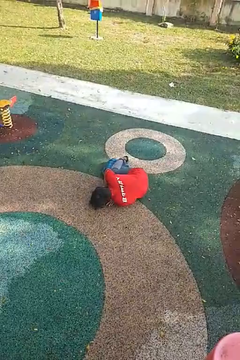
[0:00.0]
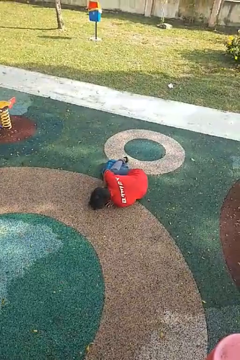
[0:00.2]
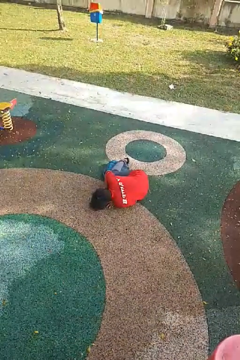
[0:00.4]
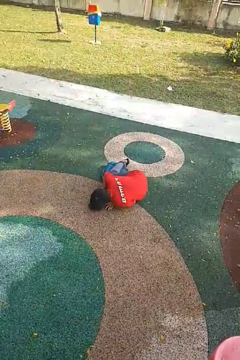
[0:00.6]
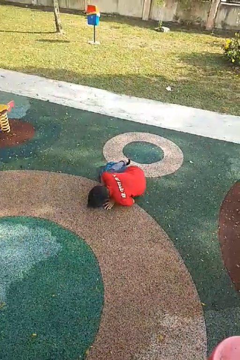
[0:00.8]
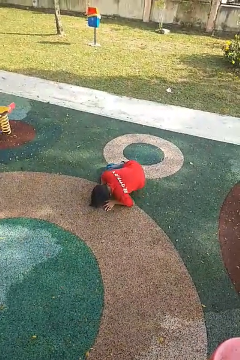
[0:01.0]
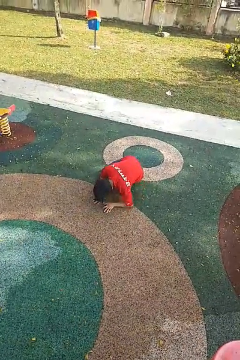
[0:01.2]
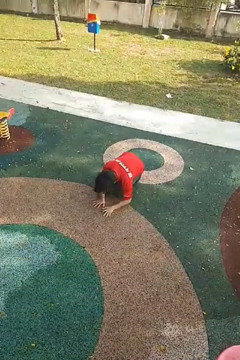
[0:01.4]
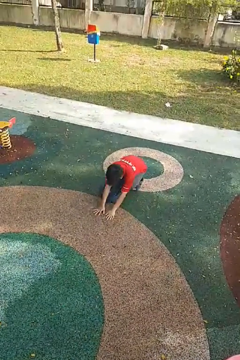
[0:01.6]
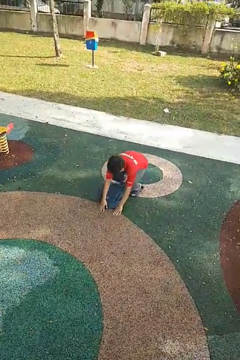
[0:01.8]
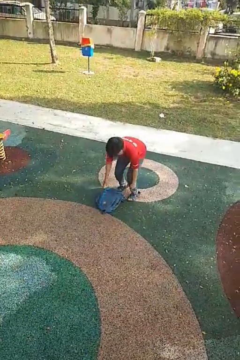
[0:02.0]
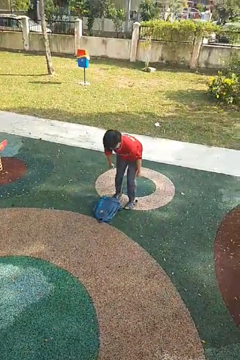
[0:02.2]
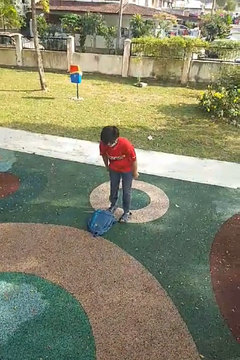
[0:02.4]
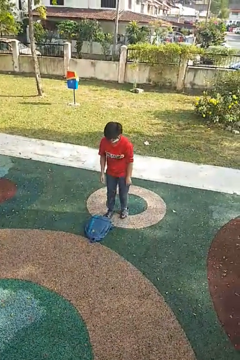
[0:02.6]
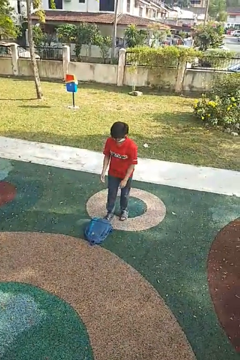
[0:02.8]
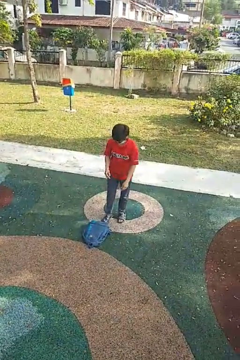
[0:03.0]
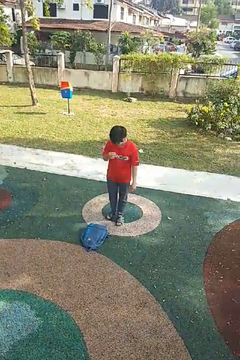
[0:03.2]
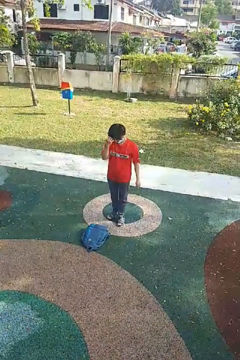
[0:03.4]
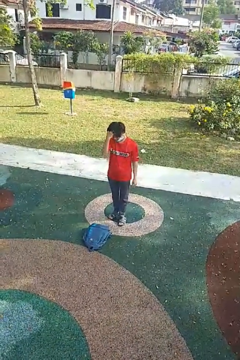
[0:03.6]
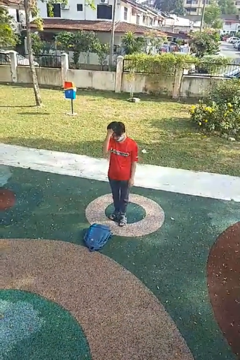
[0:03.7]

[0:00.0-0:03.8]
person stands up from floor

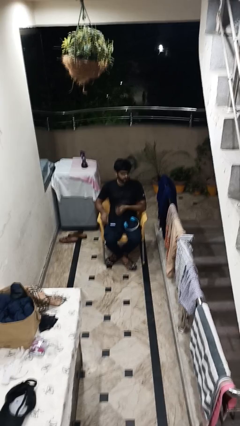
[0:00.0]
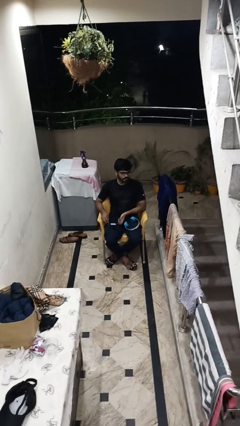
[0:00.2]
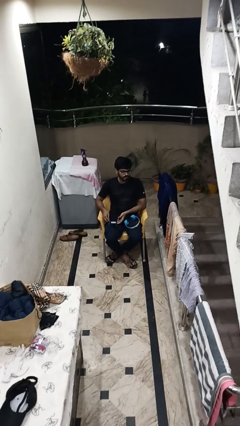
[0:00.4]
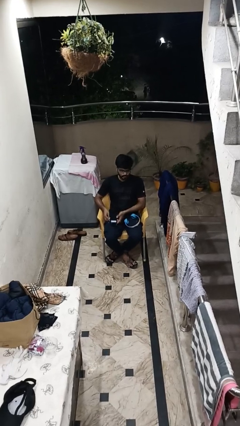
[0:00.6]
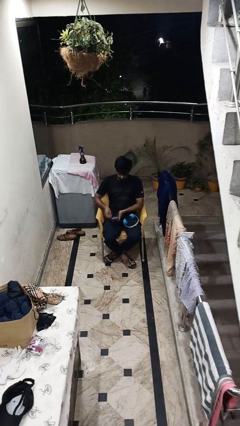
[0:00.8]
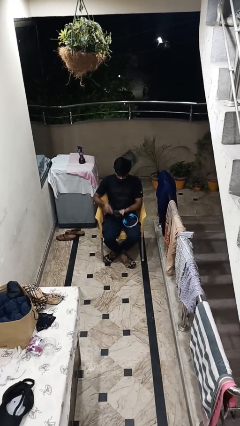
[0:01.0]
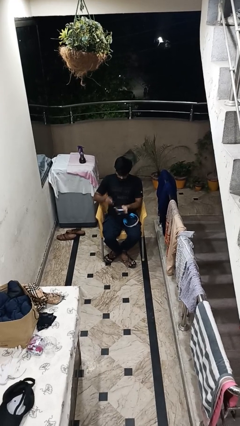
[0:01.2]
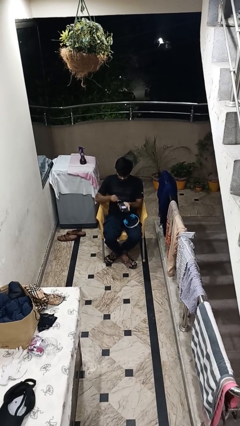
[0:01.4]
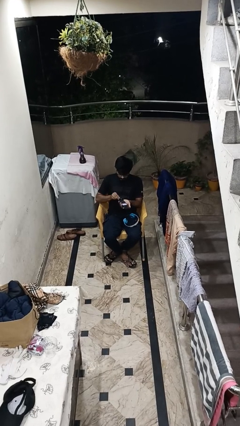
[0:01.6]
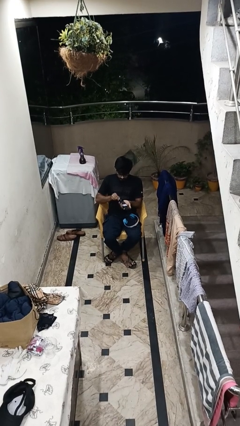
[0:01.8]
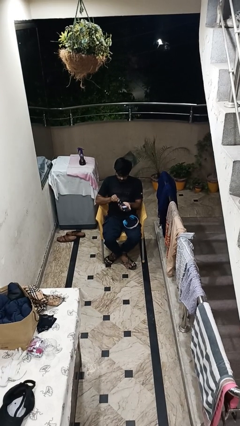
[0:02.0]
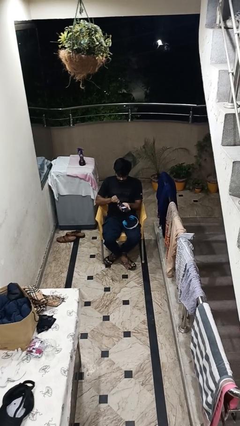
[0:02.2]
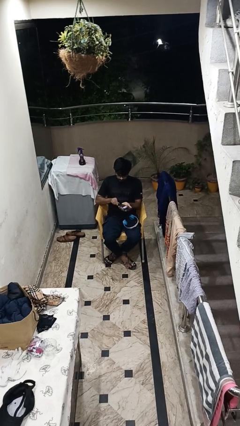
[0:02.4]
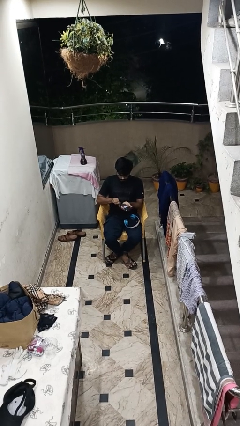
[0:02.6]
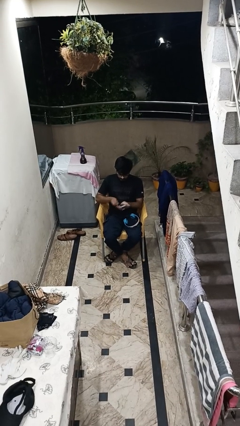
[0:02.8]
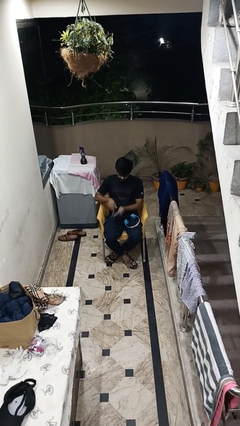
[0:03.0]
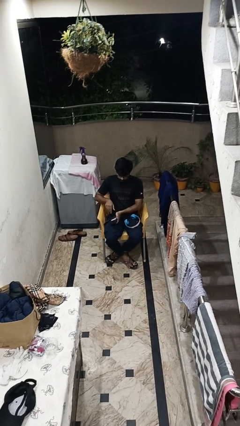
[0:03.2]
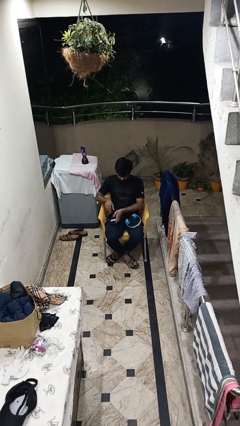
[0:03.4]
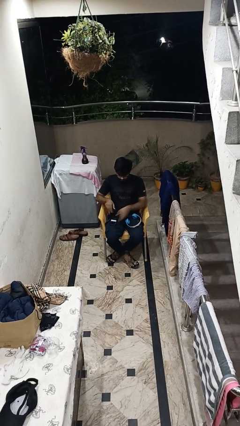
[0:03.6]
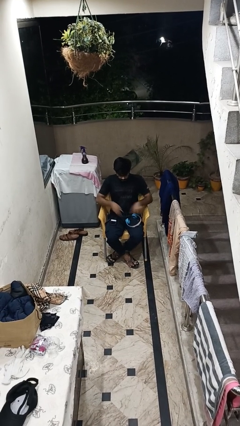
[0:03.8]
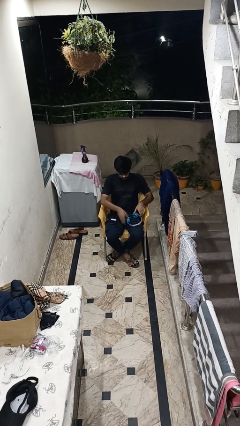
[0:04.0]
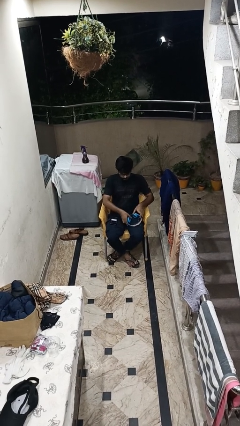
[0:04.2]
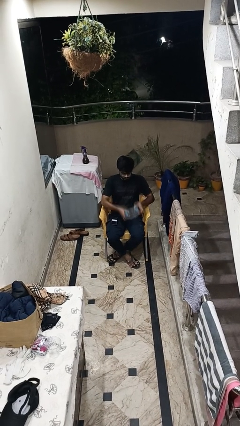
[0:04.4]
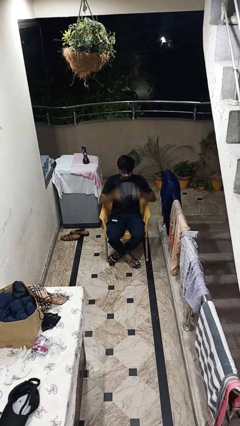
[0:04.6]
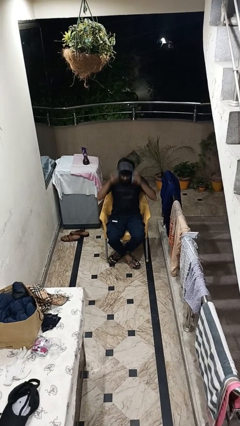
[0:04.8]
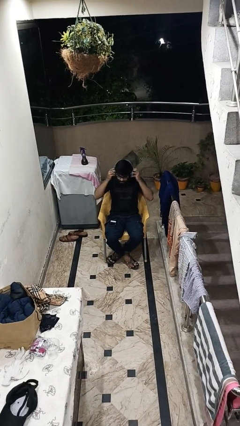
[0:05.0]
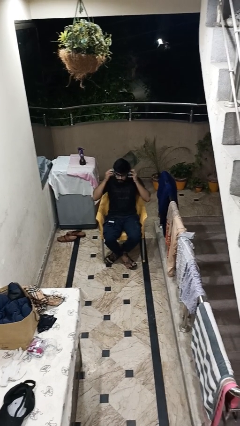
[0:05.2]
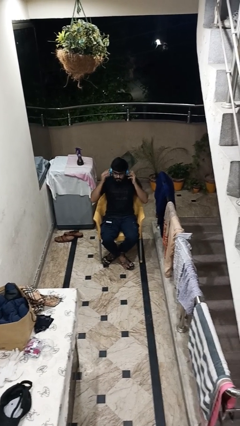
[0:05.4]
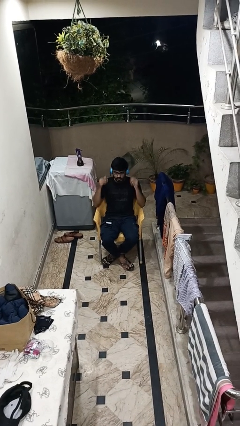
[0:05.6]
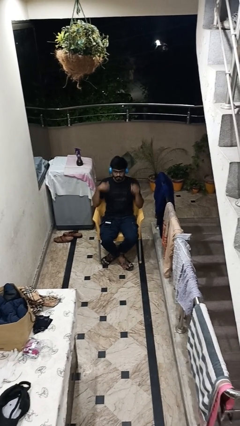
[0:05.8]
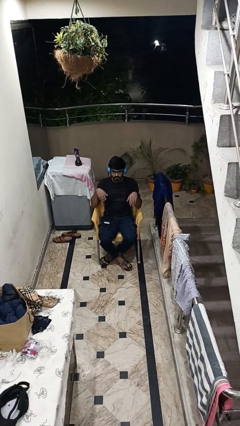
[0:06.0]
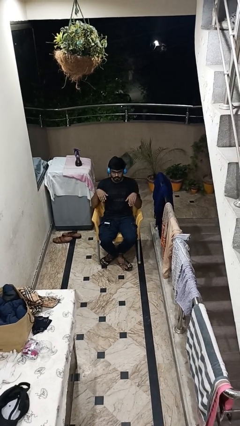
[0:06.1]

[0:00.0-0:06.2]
person puts on headphones

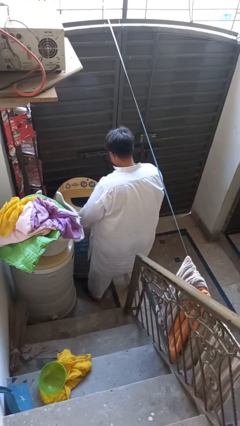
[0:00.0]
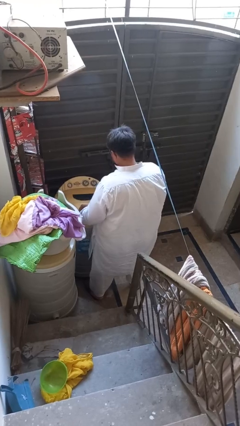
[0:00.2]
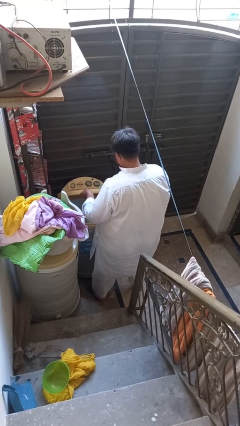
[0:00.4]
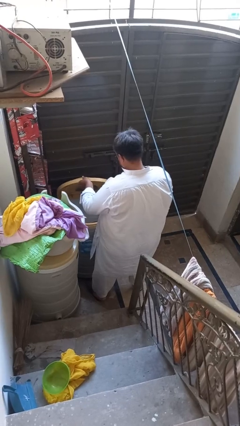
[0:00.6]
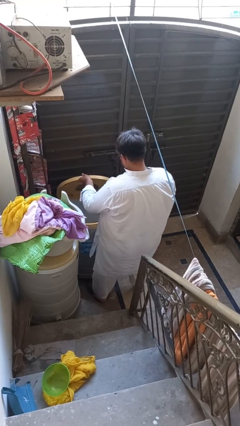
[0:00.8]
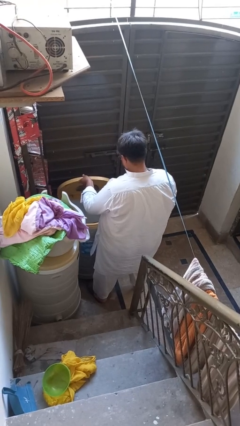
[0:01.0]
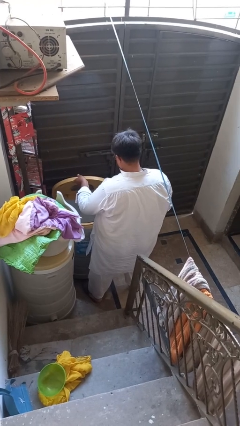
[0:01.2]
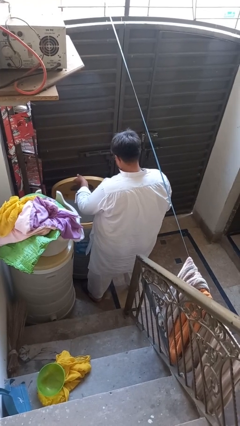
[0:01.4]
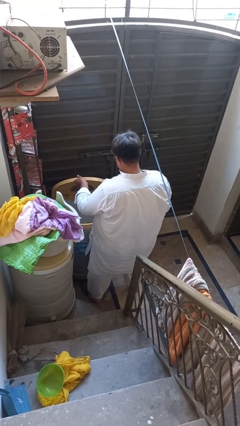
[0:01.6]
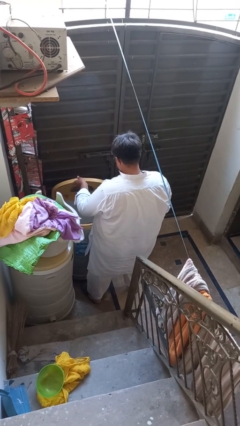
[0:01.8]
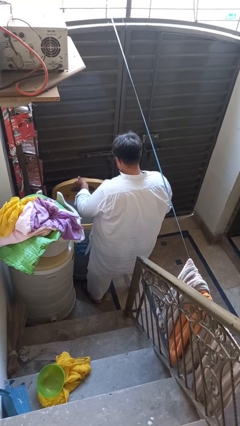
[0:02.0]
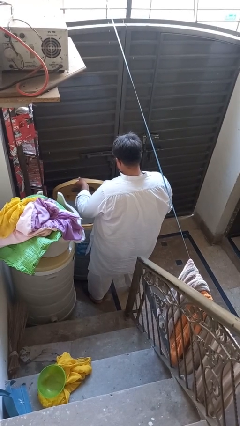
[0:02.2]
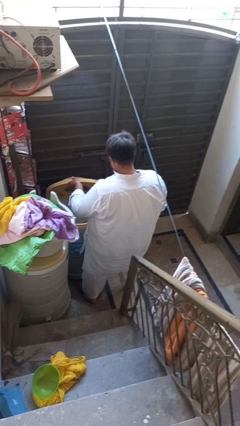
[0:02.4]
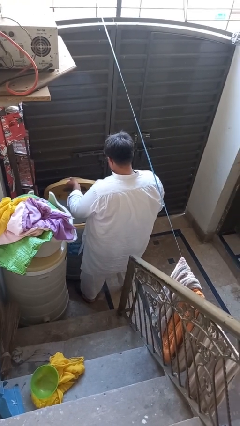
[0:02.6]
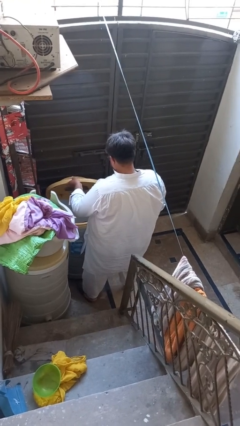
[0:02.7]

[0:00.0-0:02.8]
person opens clothes washer

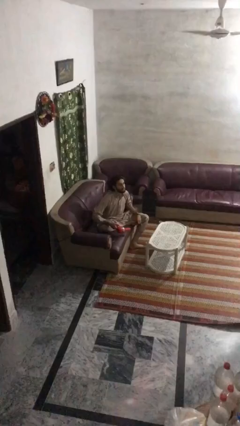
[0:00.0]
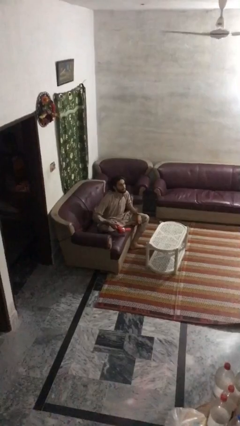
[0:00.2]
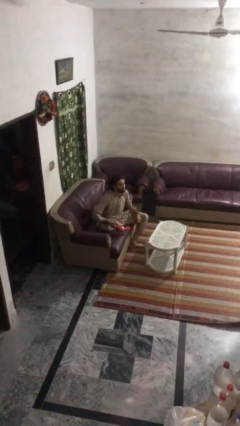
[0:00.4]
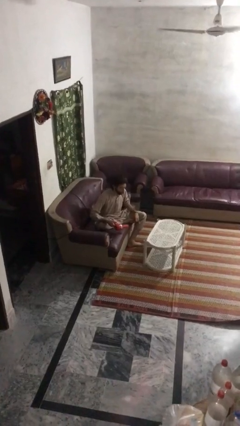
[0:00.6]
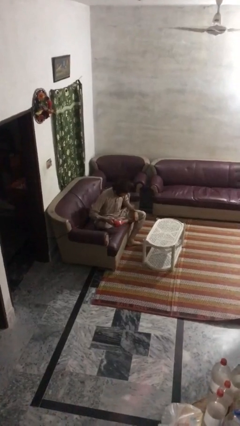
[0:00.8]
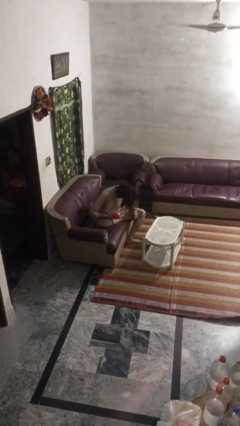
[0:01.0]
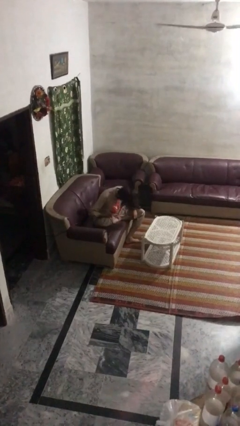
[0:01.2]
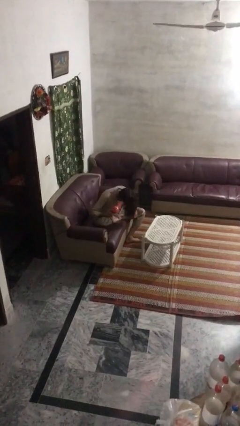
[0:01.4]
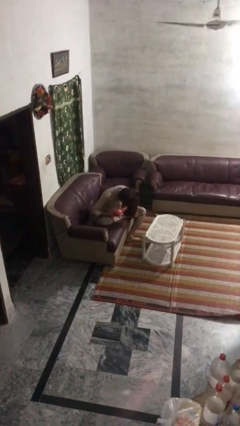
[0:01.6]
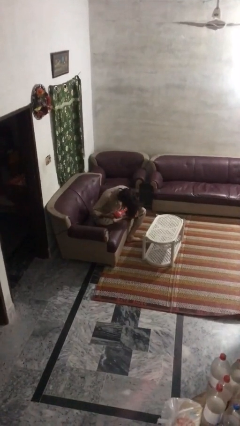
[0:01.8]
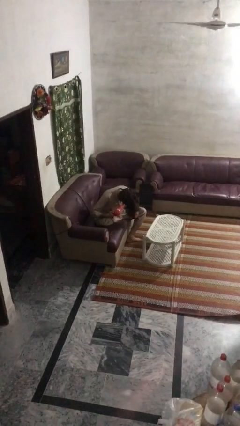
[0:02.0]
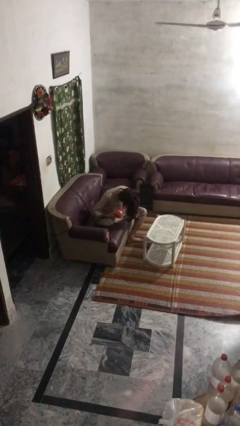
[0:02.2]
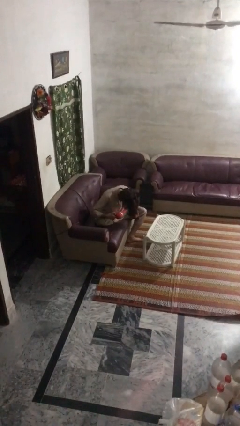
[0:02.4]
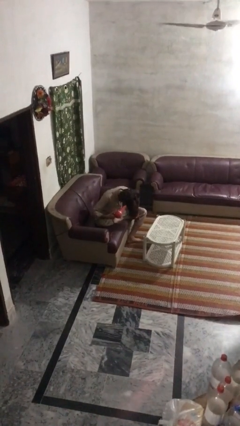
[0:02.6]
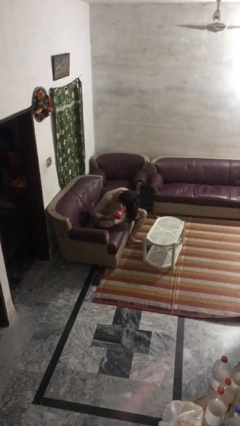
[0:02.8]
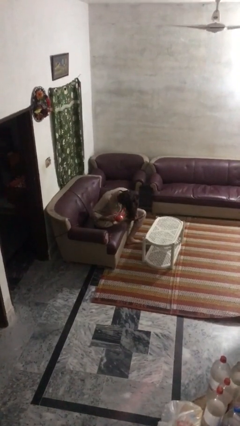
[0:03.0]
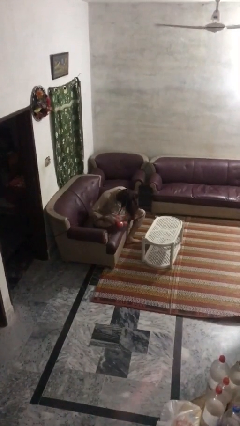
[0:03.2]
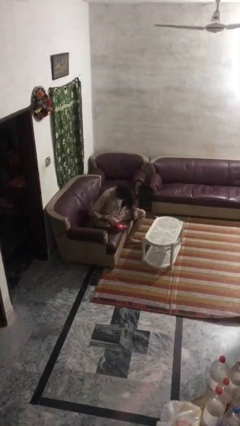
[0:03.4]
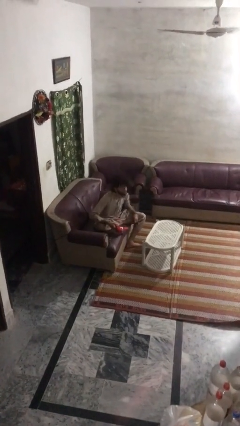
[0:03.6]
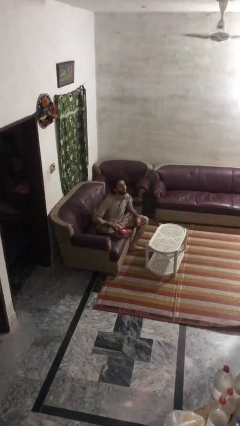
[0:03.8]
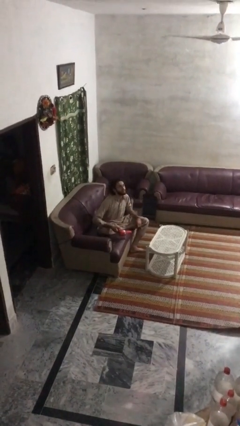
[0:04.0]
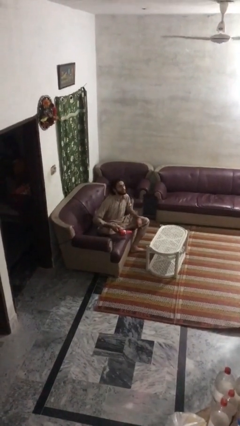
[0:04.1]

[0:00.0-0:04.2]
person dries hair with hairdryer

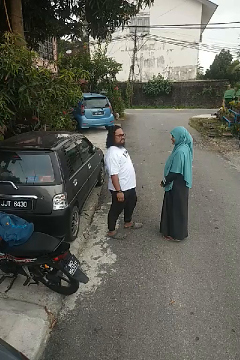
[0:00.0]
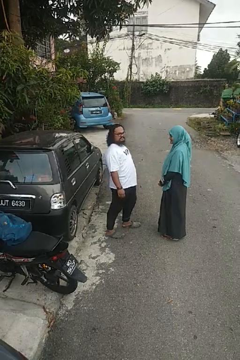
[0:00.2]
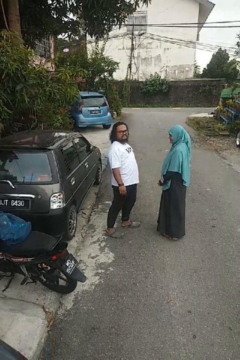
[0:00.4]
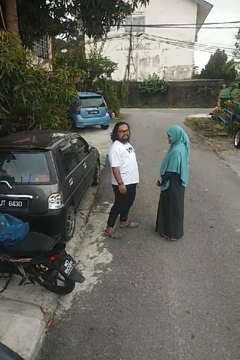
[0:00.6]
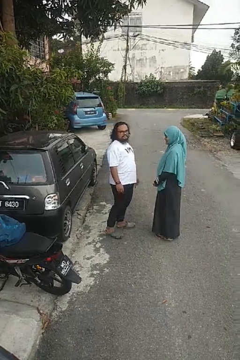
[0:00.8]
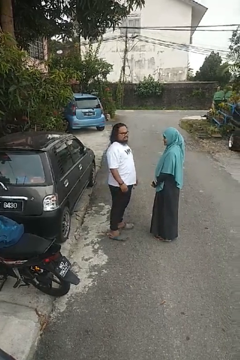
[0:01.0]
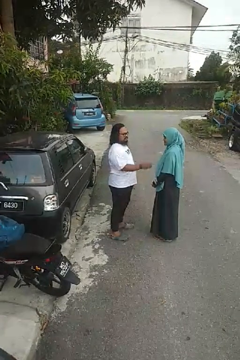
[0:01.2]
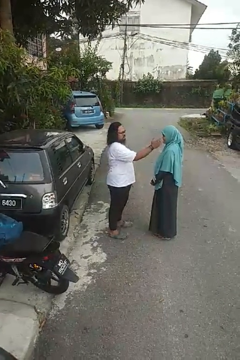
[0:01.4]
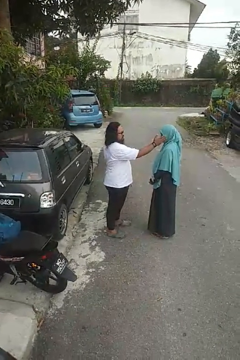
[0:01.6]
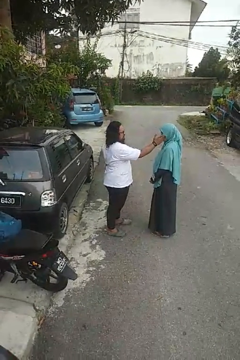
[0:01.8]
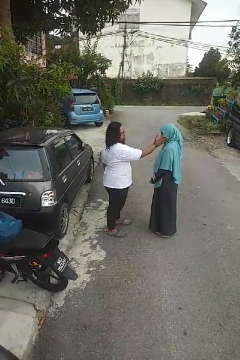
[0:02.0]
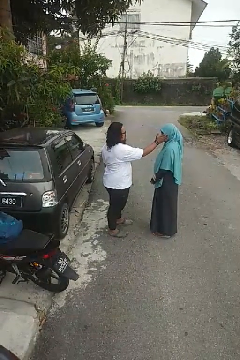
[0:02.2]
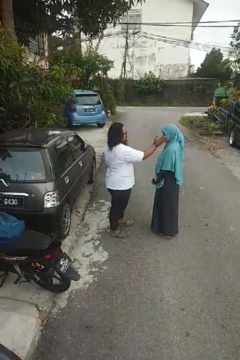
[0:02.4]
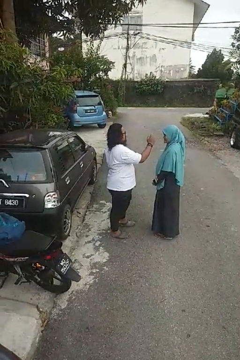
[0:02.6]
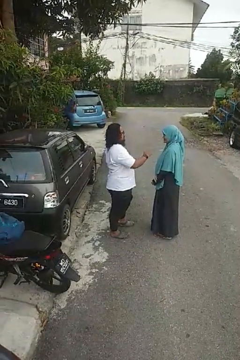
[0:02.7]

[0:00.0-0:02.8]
person touches face of person
